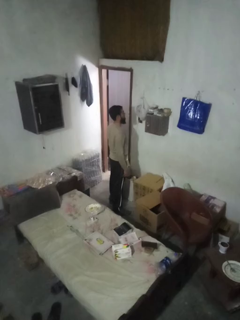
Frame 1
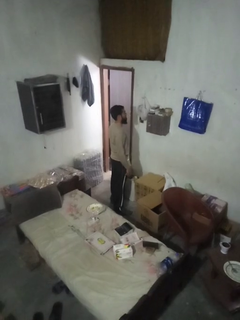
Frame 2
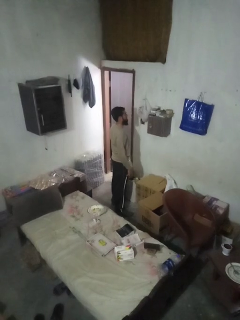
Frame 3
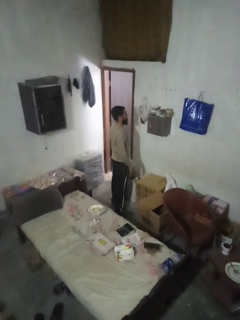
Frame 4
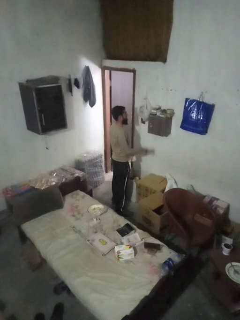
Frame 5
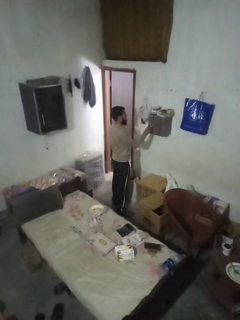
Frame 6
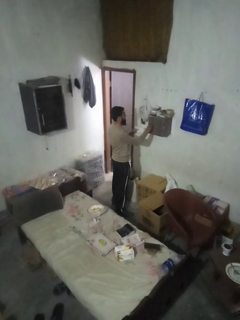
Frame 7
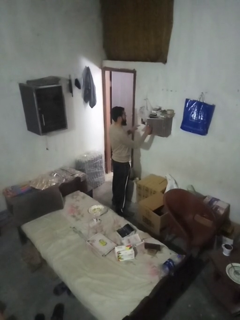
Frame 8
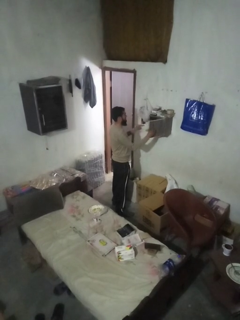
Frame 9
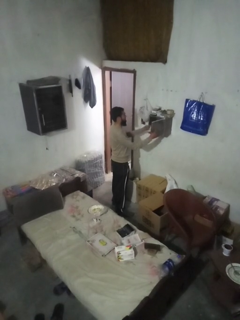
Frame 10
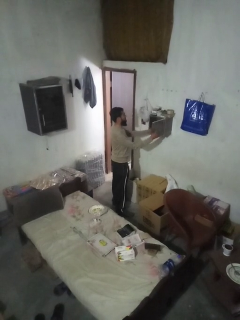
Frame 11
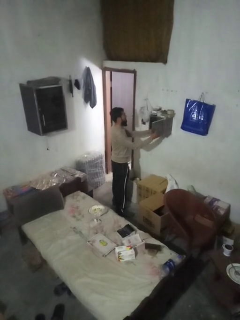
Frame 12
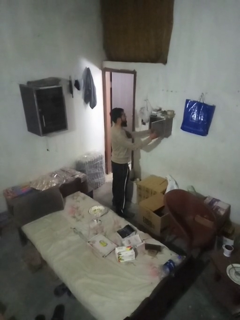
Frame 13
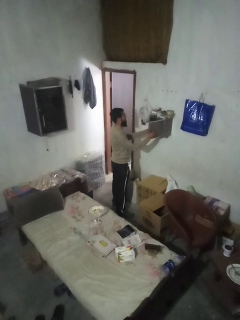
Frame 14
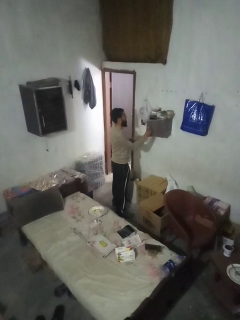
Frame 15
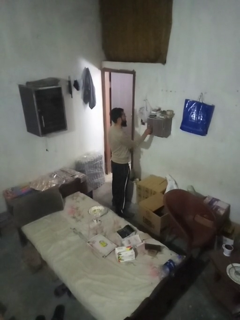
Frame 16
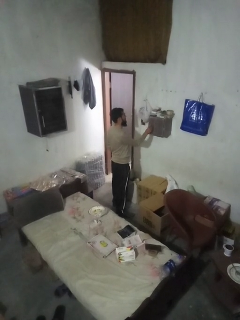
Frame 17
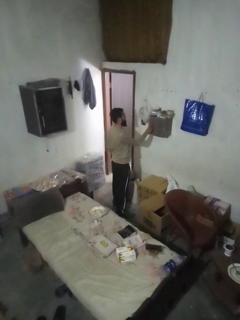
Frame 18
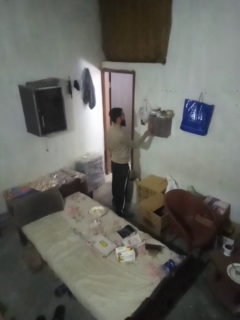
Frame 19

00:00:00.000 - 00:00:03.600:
person puts letters in mailbox

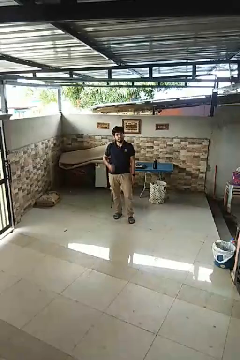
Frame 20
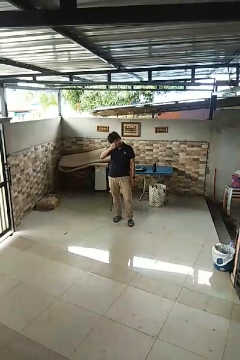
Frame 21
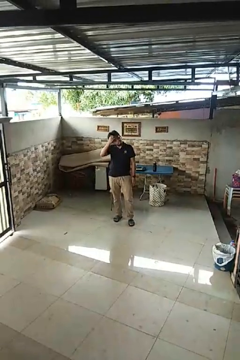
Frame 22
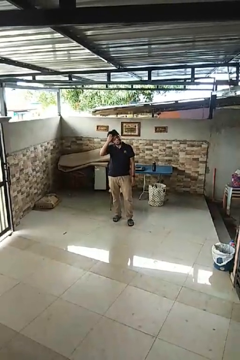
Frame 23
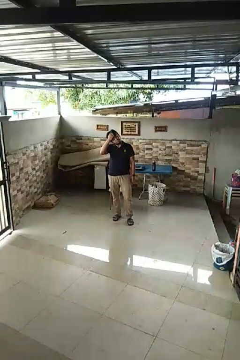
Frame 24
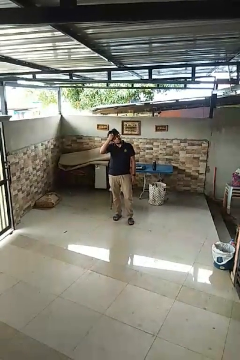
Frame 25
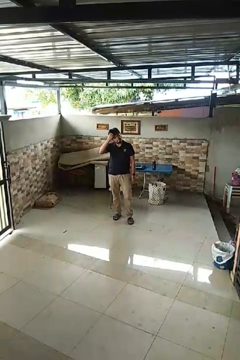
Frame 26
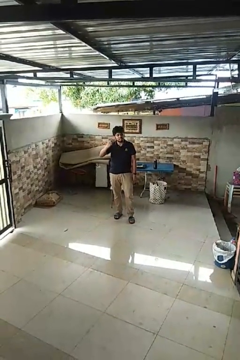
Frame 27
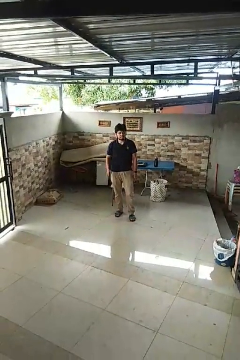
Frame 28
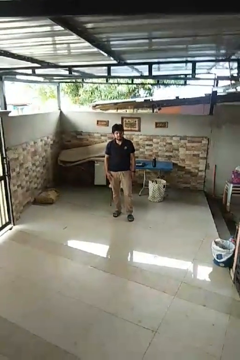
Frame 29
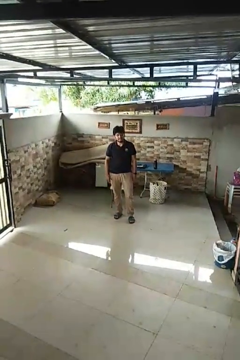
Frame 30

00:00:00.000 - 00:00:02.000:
person scratches face

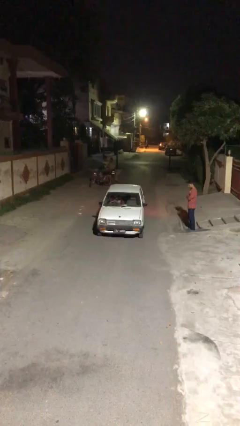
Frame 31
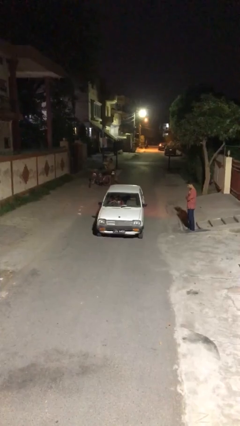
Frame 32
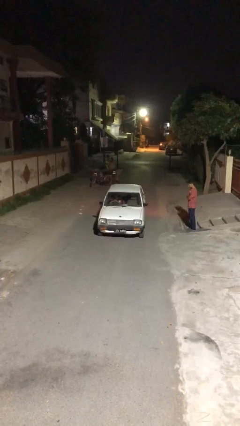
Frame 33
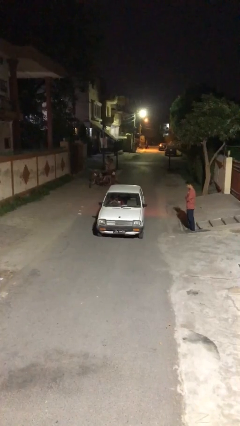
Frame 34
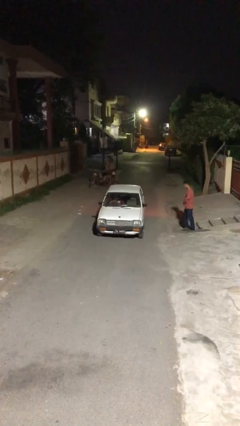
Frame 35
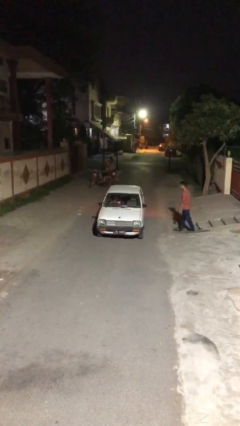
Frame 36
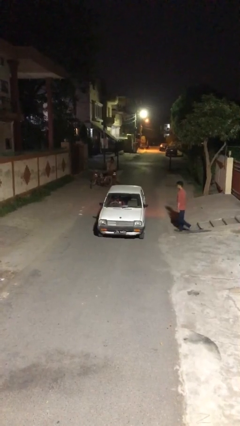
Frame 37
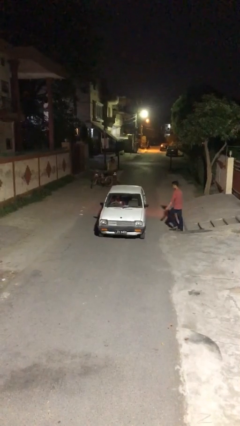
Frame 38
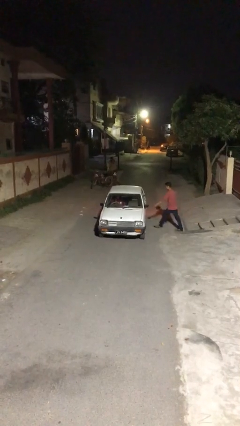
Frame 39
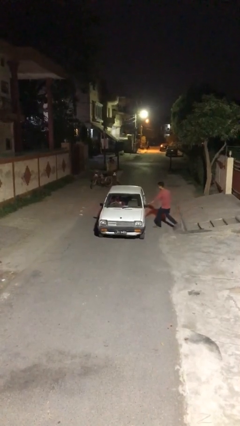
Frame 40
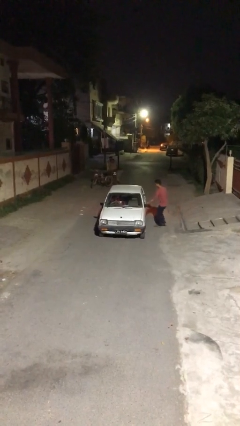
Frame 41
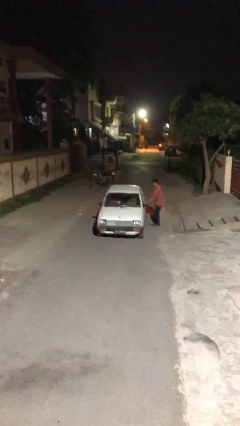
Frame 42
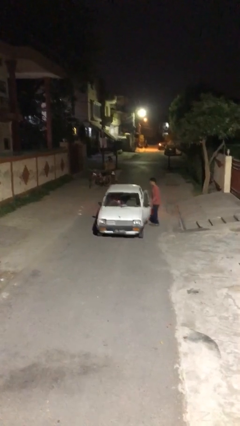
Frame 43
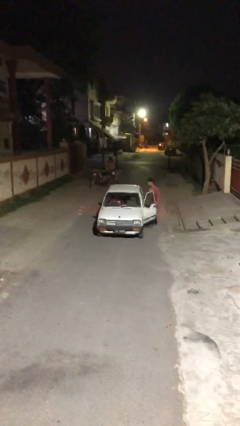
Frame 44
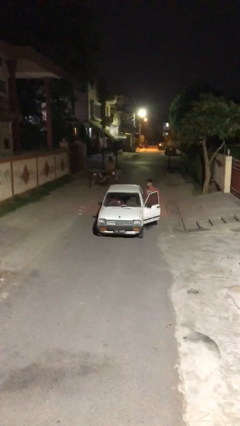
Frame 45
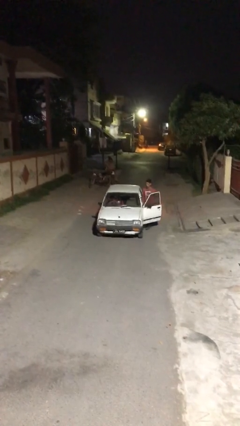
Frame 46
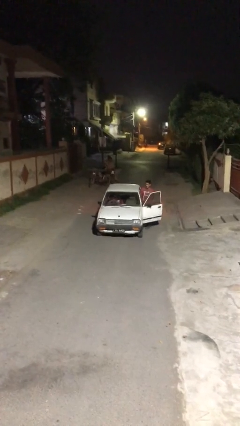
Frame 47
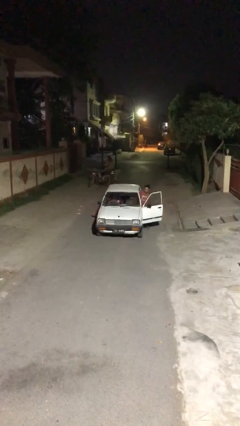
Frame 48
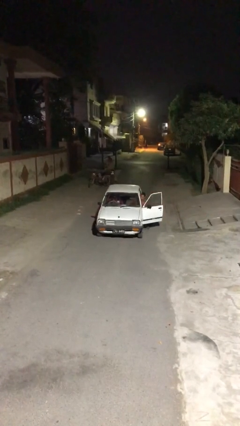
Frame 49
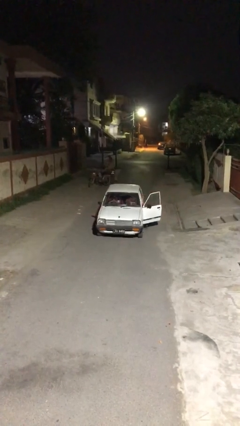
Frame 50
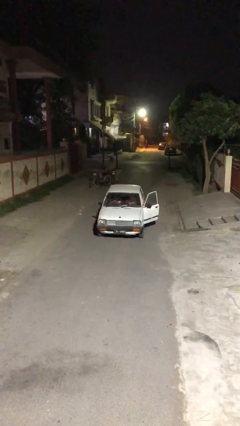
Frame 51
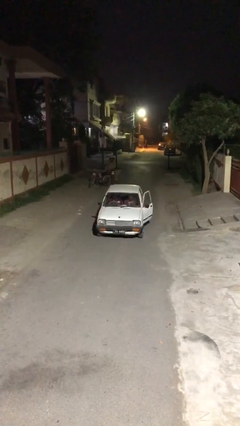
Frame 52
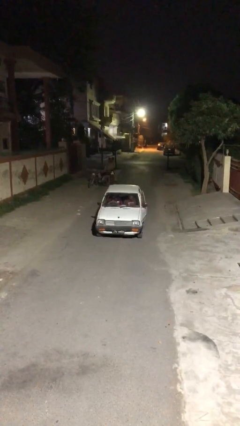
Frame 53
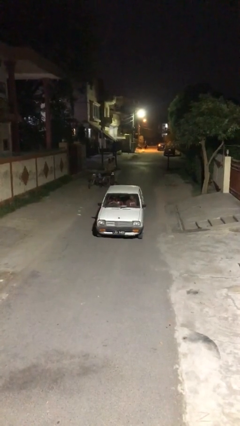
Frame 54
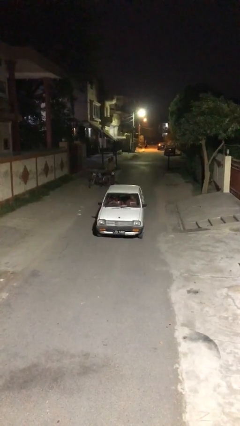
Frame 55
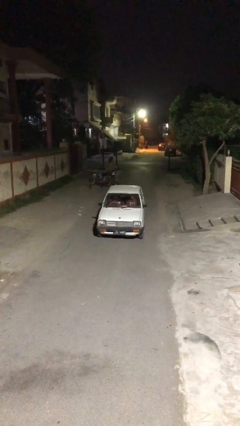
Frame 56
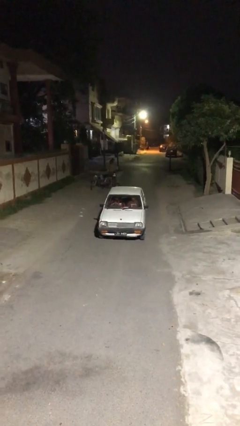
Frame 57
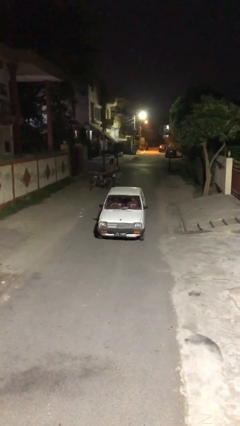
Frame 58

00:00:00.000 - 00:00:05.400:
car picks up person

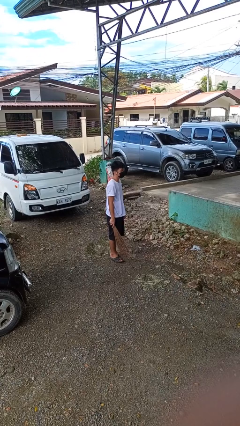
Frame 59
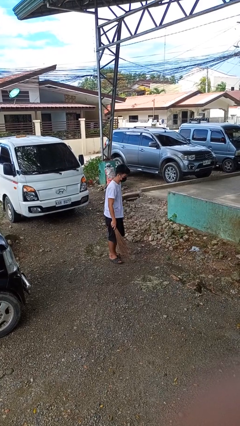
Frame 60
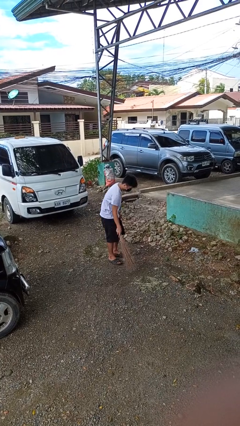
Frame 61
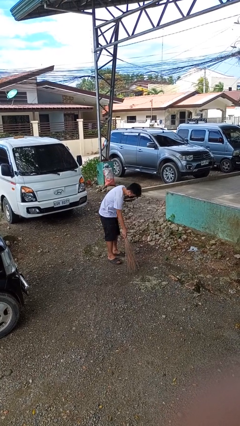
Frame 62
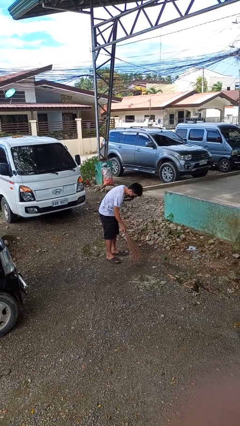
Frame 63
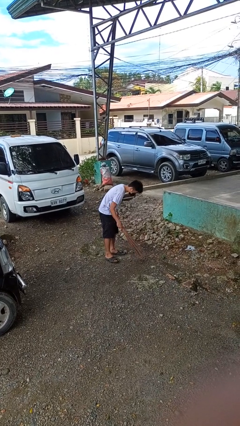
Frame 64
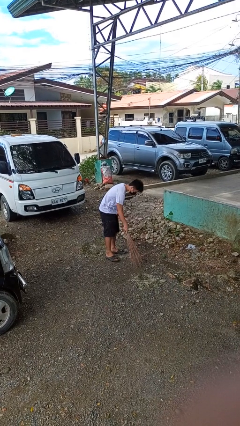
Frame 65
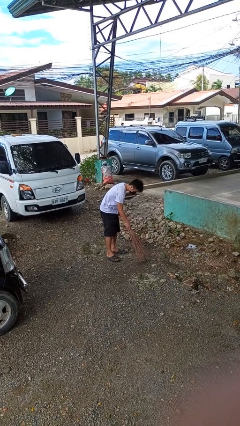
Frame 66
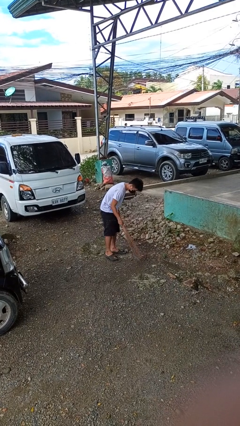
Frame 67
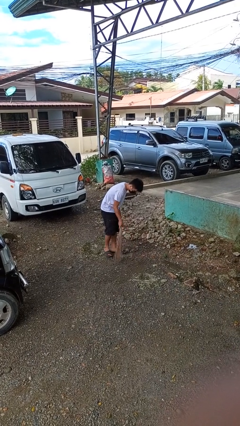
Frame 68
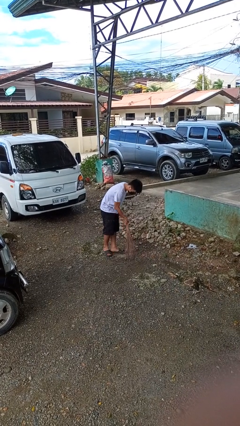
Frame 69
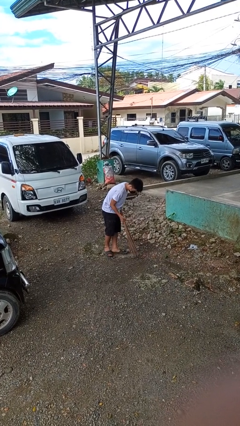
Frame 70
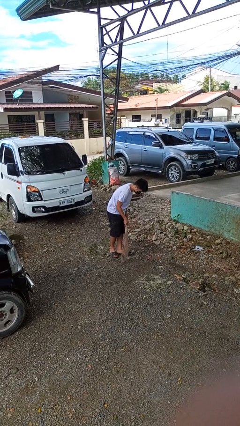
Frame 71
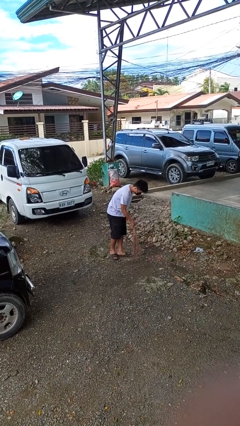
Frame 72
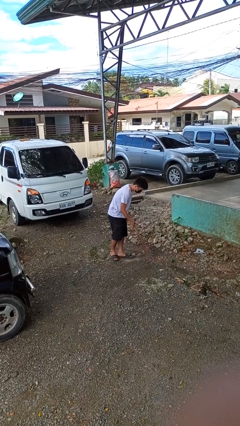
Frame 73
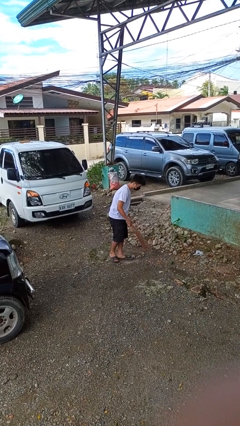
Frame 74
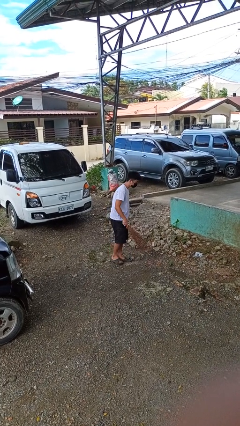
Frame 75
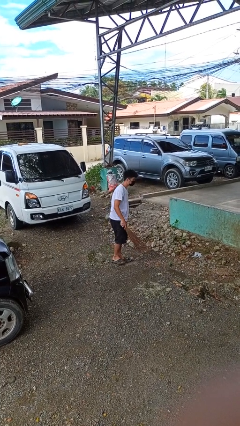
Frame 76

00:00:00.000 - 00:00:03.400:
person sweeps floor

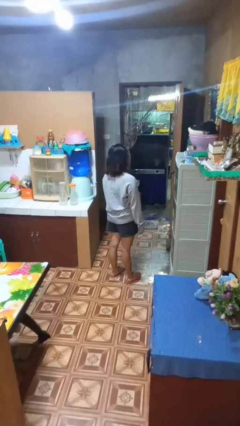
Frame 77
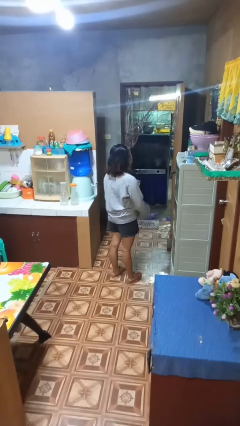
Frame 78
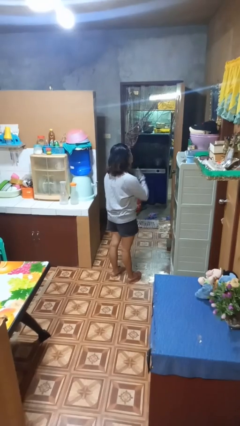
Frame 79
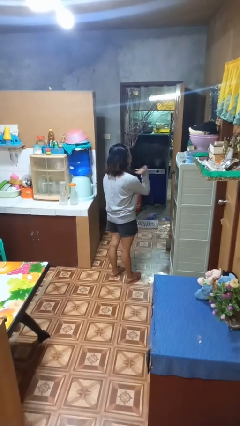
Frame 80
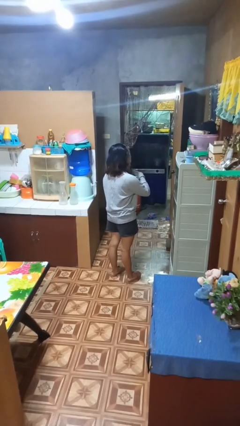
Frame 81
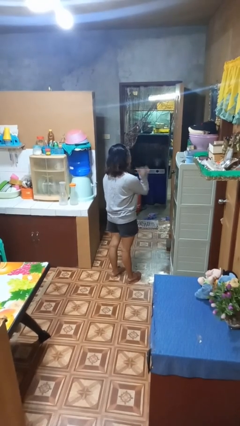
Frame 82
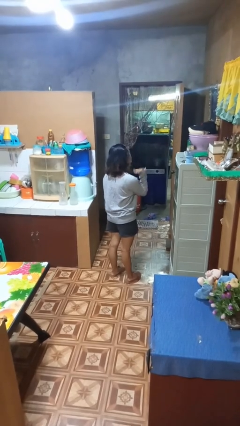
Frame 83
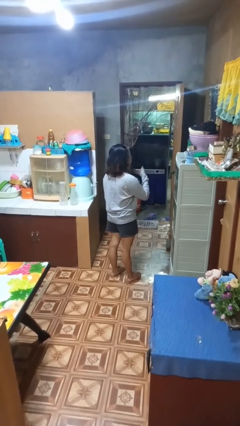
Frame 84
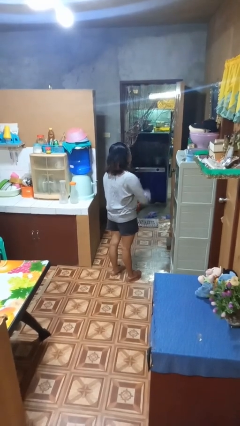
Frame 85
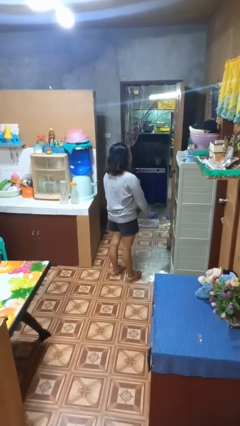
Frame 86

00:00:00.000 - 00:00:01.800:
person gestures cut

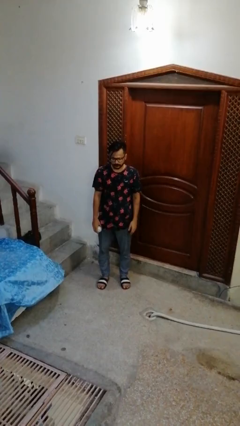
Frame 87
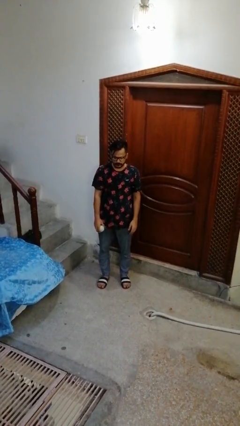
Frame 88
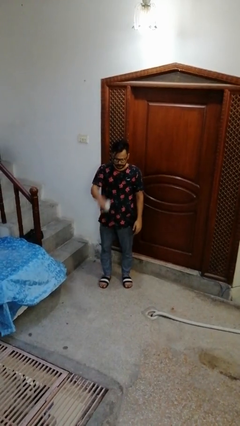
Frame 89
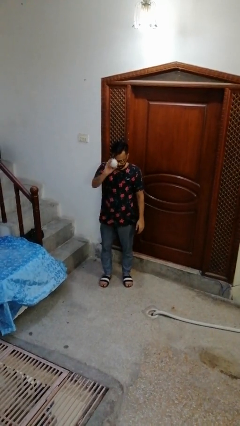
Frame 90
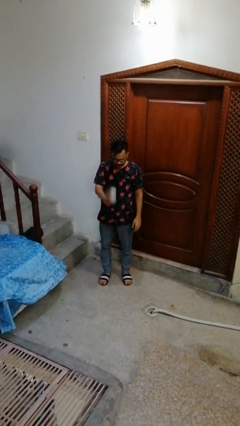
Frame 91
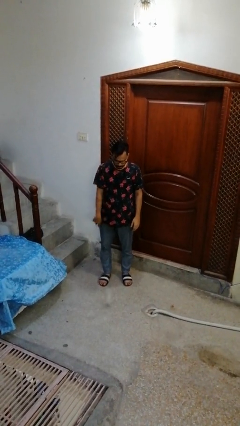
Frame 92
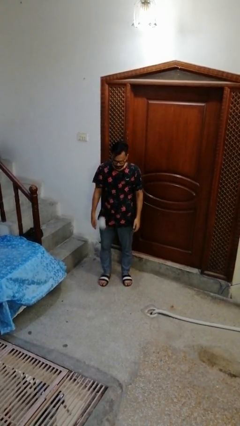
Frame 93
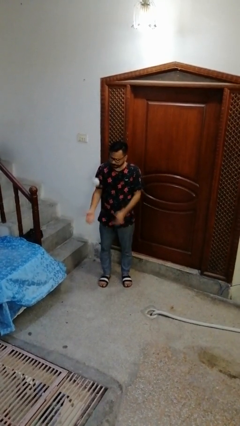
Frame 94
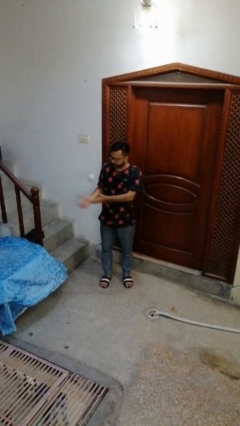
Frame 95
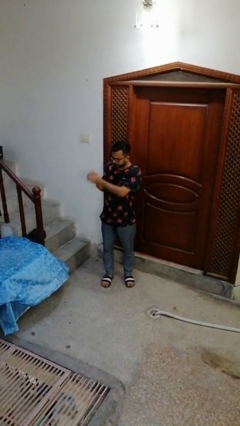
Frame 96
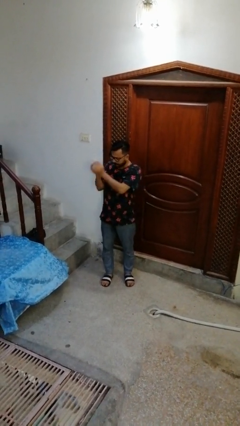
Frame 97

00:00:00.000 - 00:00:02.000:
person bounces ball on floor

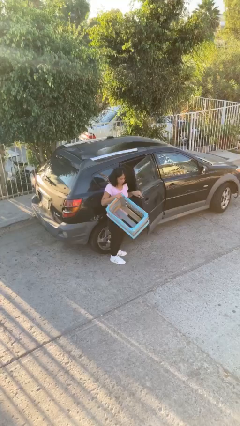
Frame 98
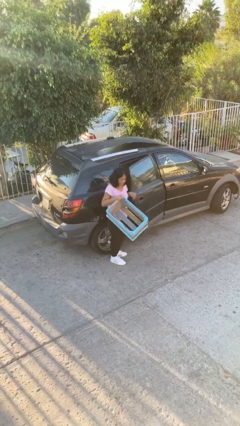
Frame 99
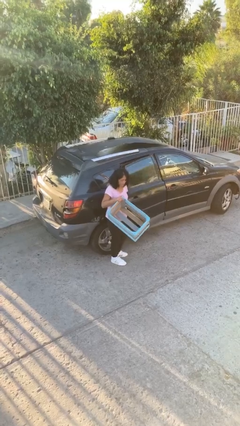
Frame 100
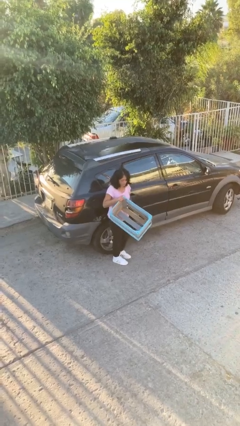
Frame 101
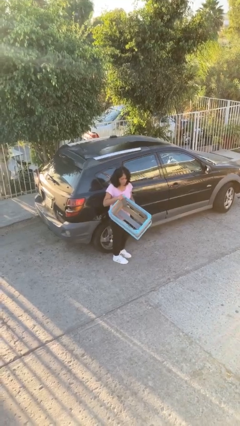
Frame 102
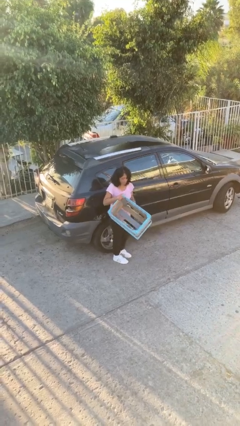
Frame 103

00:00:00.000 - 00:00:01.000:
person closes car door
